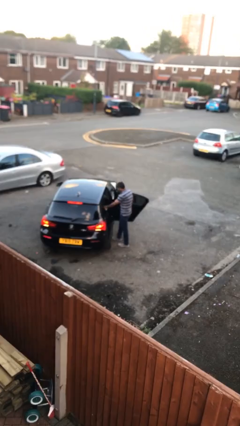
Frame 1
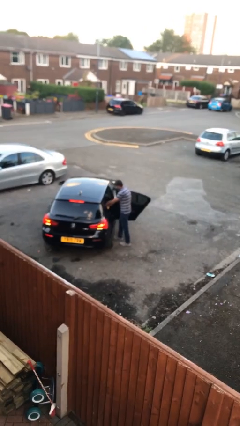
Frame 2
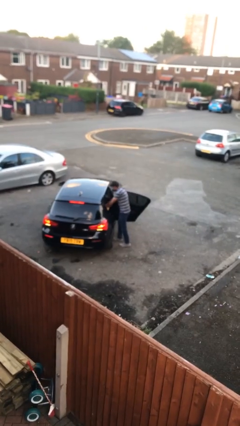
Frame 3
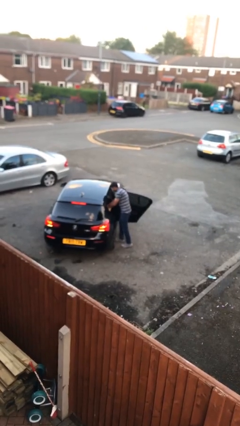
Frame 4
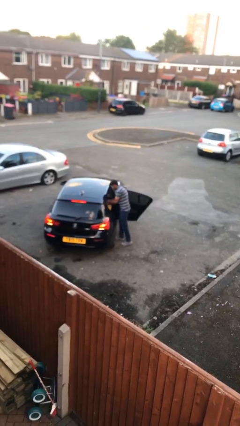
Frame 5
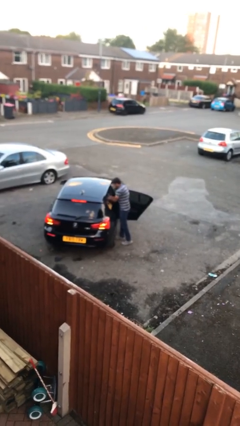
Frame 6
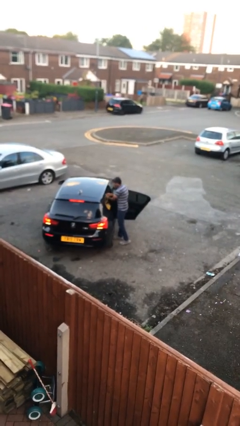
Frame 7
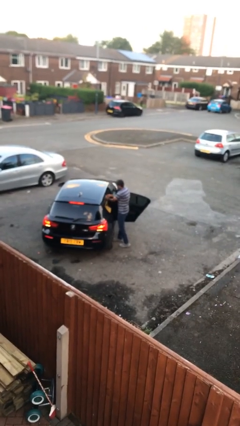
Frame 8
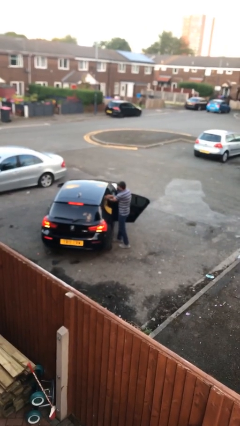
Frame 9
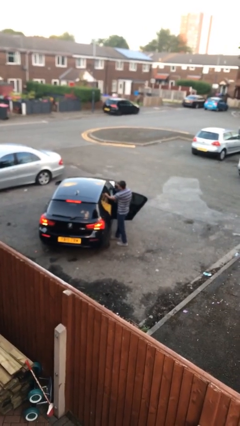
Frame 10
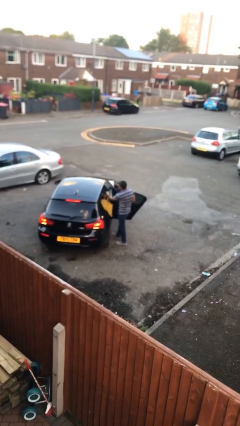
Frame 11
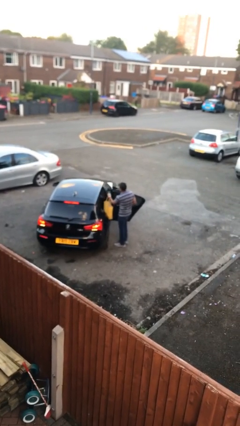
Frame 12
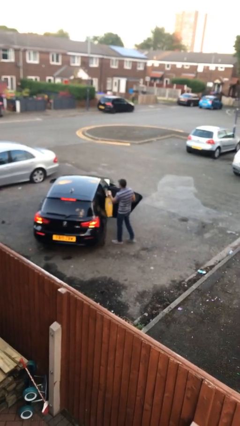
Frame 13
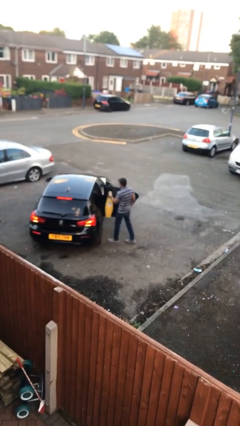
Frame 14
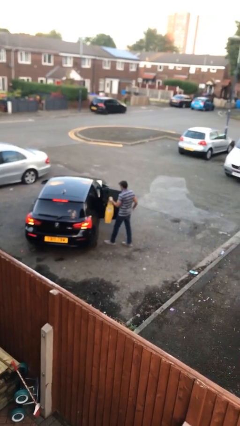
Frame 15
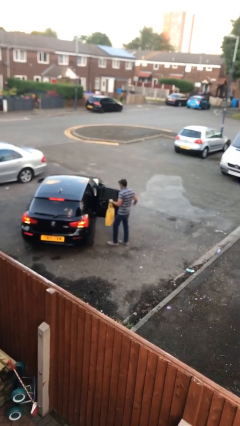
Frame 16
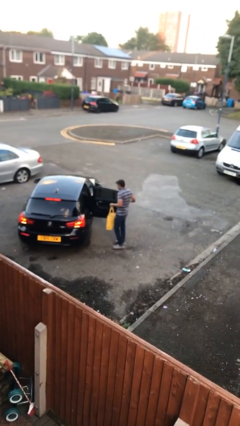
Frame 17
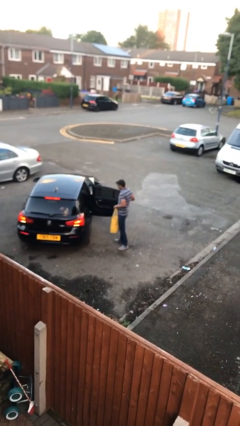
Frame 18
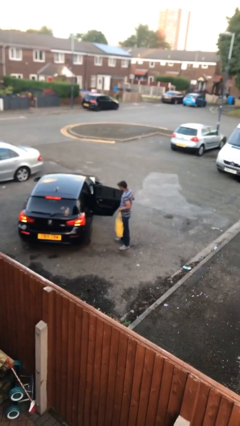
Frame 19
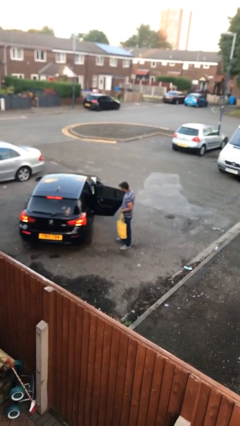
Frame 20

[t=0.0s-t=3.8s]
person unloads car

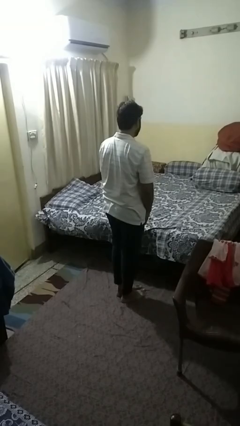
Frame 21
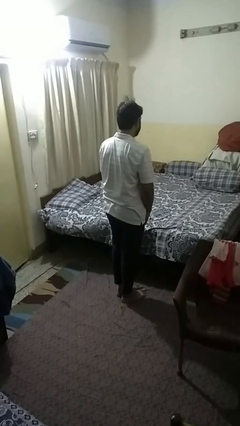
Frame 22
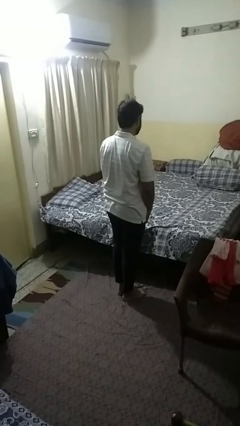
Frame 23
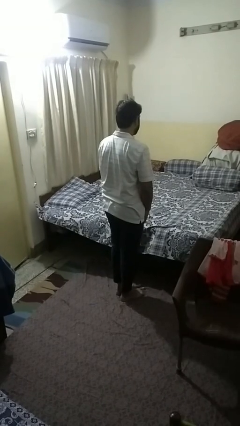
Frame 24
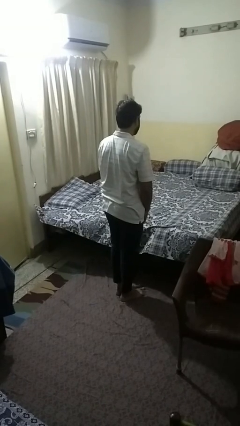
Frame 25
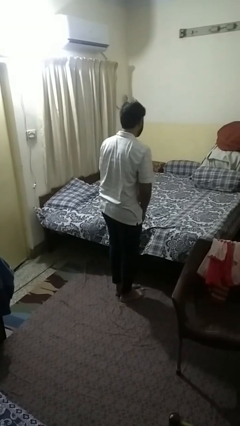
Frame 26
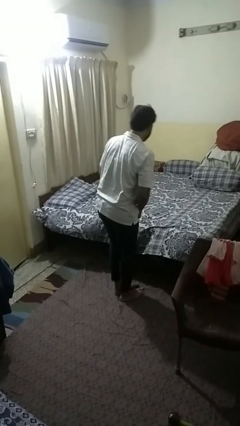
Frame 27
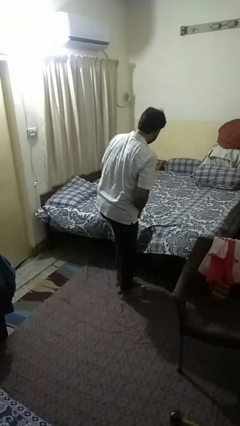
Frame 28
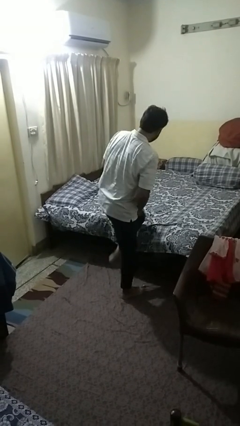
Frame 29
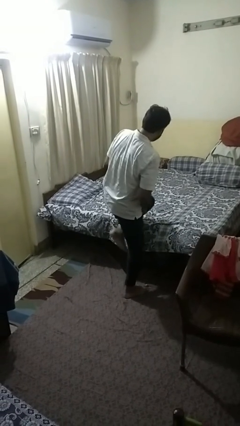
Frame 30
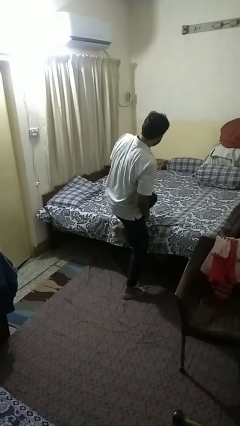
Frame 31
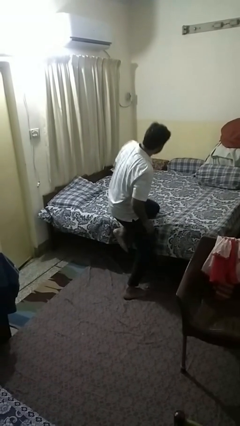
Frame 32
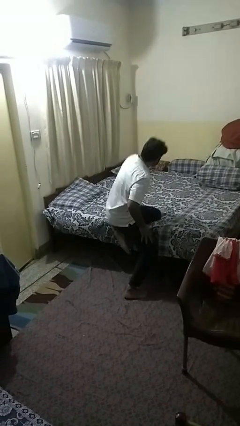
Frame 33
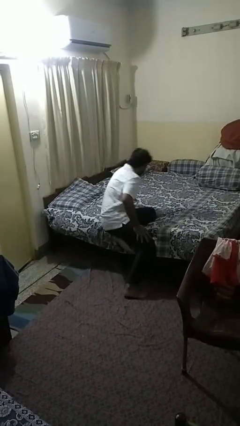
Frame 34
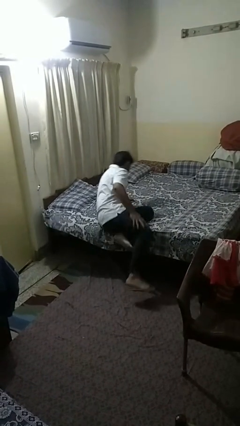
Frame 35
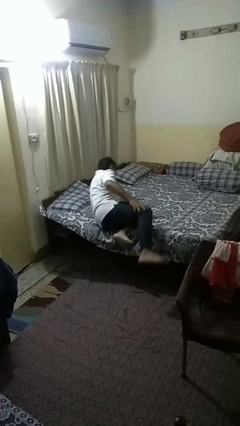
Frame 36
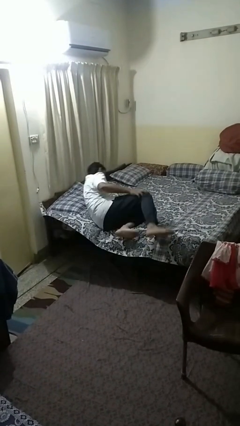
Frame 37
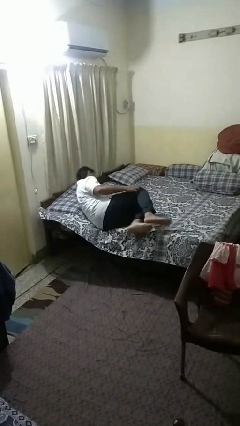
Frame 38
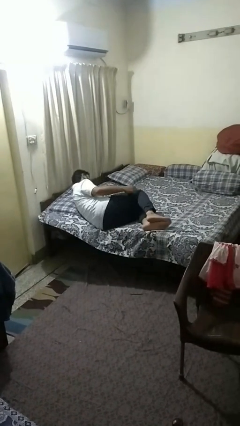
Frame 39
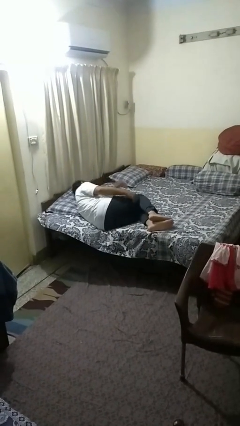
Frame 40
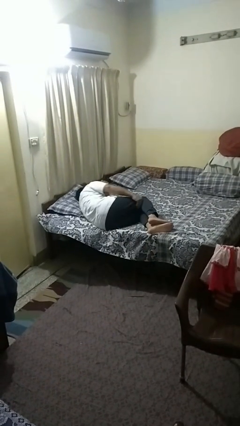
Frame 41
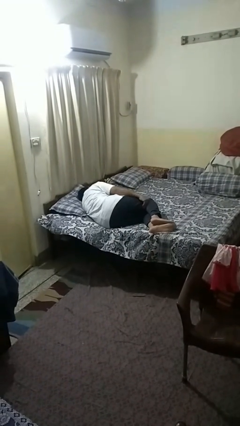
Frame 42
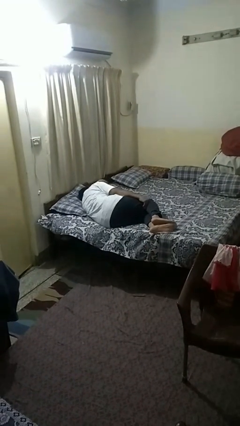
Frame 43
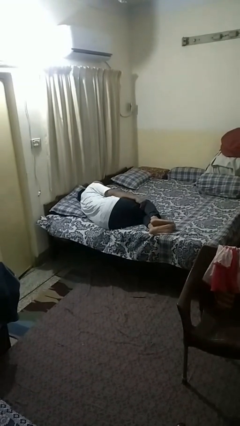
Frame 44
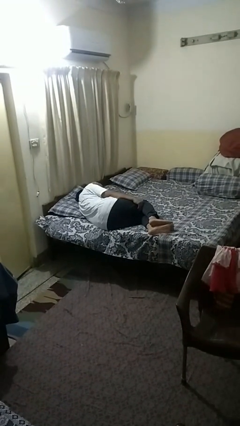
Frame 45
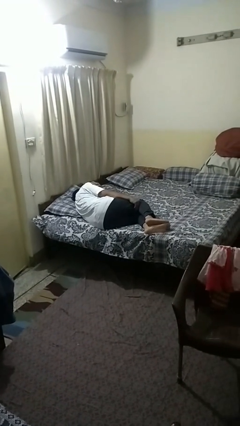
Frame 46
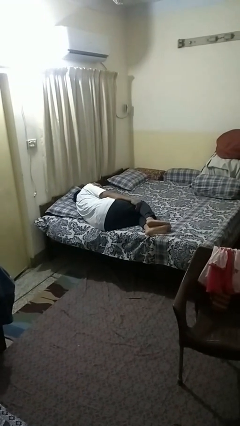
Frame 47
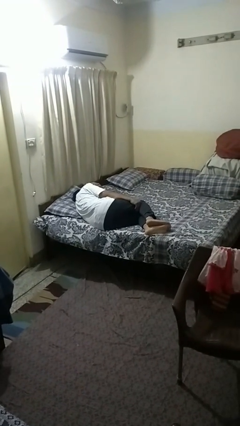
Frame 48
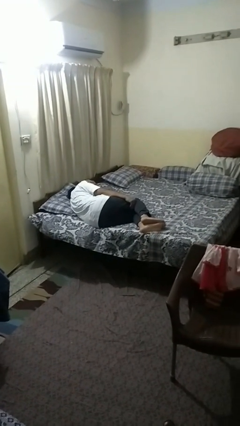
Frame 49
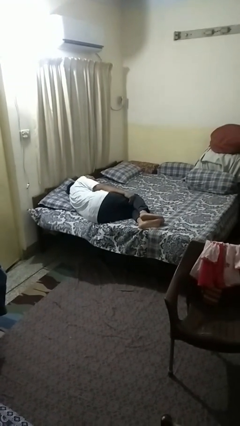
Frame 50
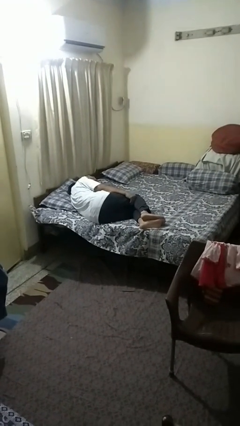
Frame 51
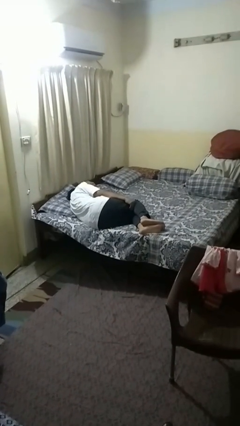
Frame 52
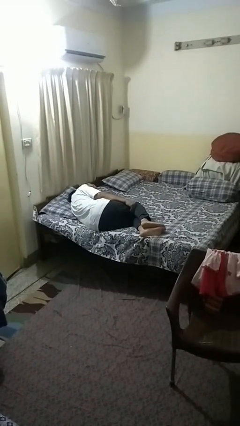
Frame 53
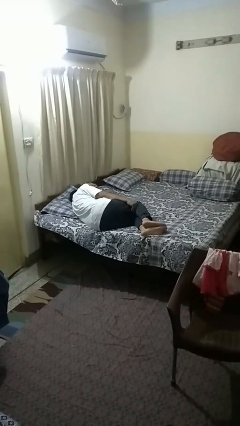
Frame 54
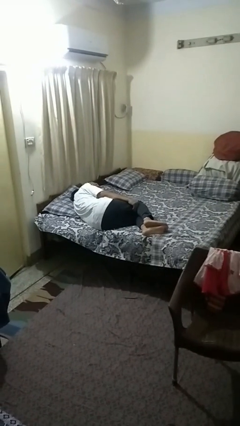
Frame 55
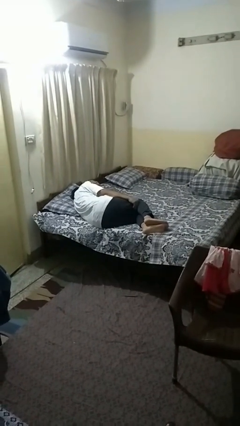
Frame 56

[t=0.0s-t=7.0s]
person lies down on bed

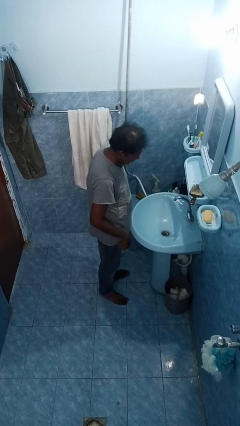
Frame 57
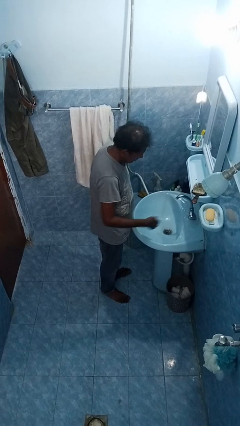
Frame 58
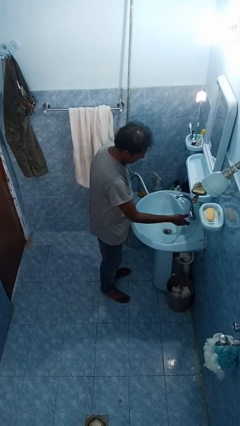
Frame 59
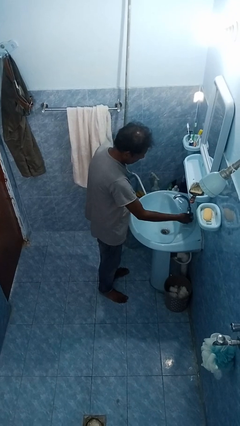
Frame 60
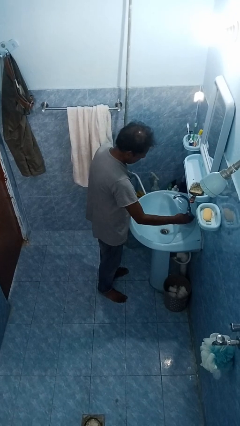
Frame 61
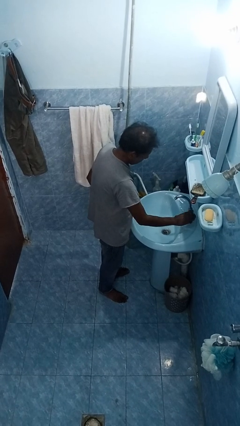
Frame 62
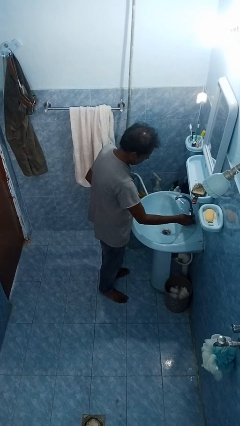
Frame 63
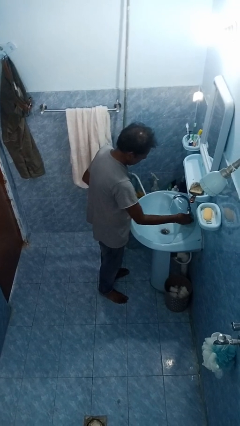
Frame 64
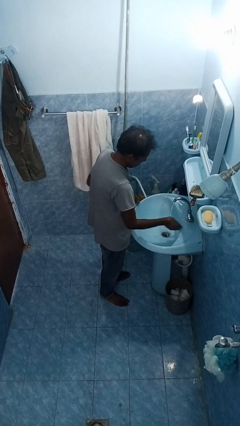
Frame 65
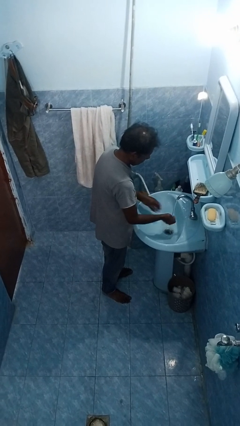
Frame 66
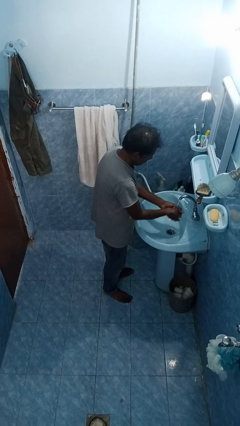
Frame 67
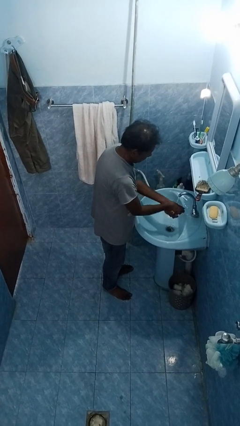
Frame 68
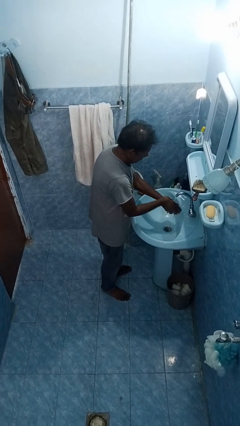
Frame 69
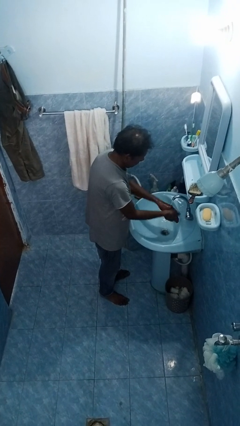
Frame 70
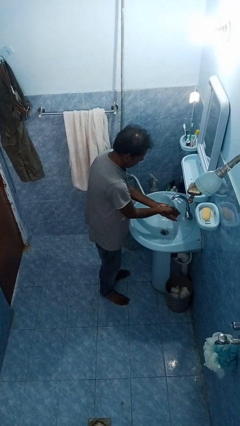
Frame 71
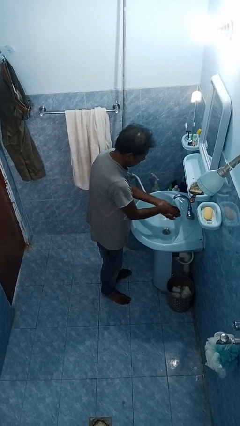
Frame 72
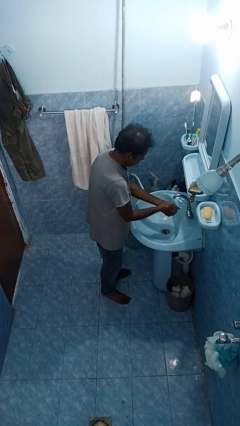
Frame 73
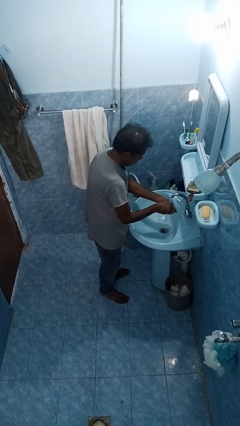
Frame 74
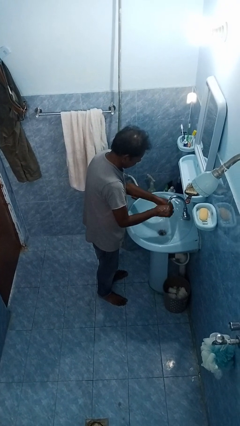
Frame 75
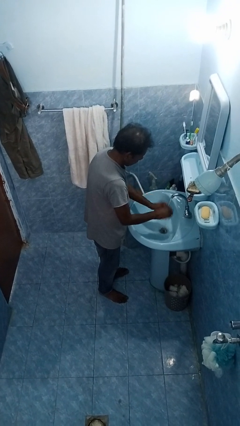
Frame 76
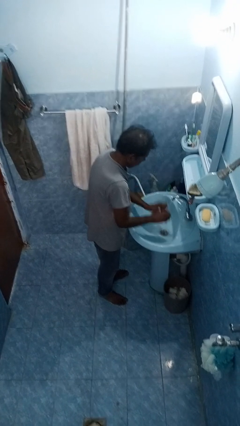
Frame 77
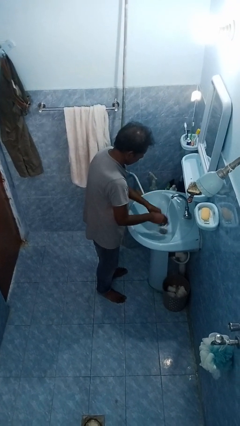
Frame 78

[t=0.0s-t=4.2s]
person washes hands

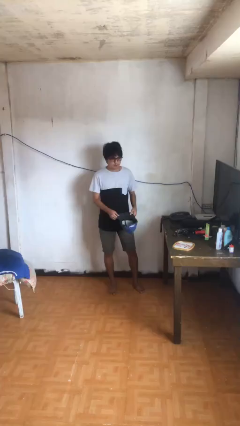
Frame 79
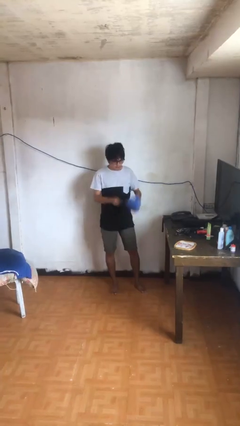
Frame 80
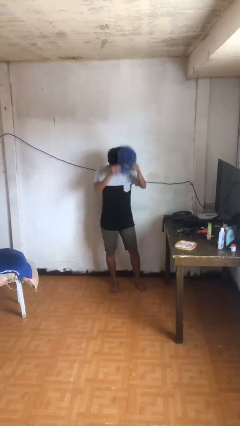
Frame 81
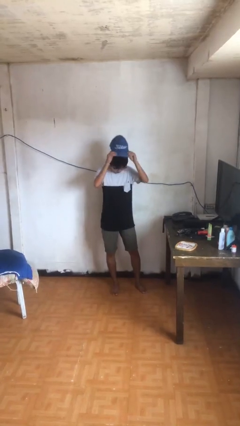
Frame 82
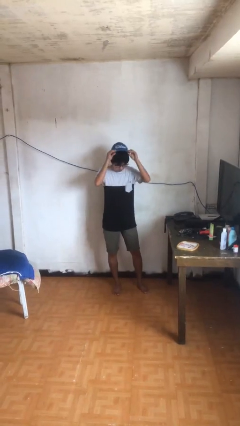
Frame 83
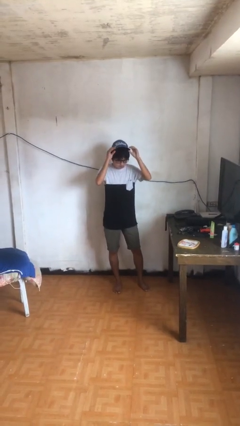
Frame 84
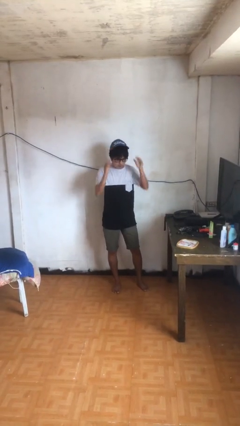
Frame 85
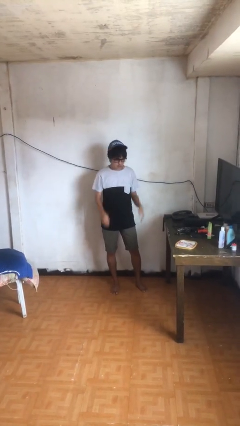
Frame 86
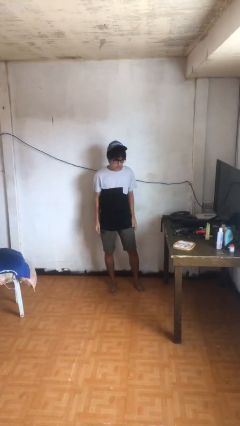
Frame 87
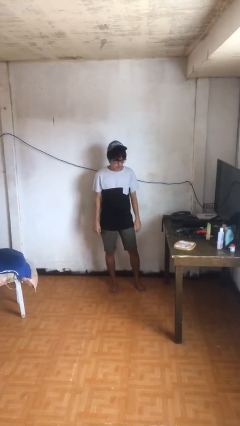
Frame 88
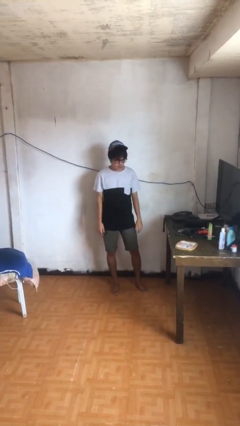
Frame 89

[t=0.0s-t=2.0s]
person puts on hat

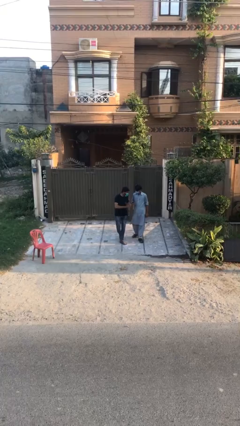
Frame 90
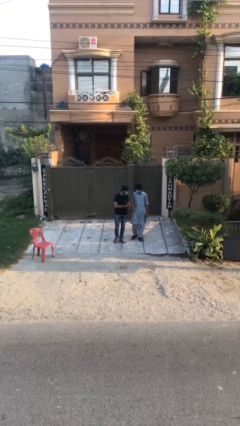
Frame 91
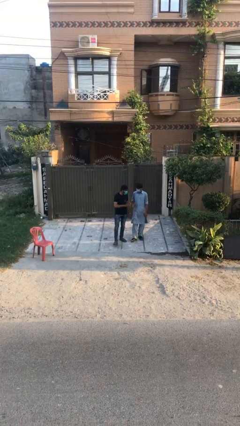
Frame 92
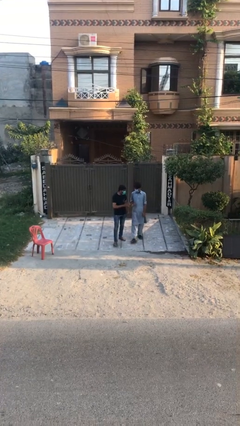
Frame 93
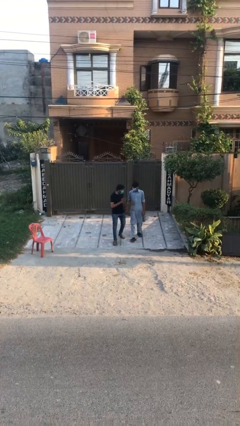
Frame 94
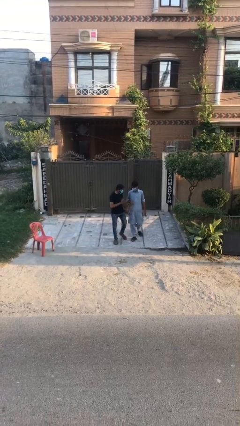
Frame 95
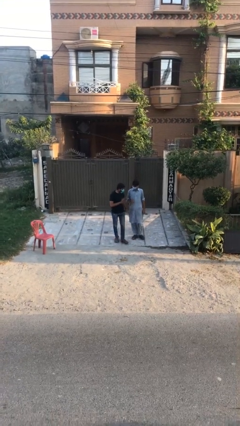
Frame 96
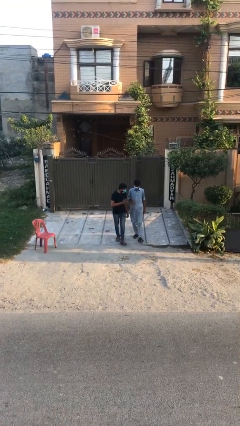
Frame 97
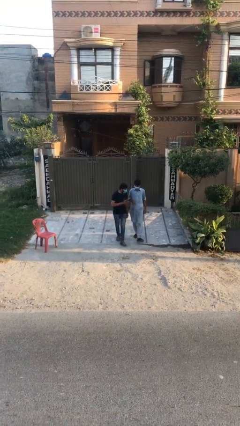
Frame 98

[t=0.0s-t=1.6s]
person talks to person
